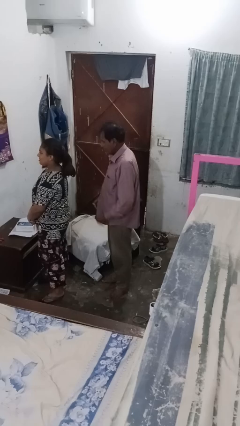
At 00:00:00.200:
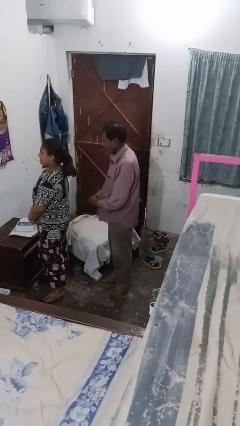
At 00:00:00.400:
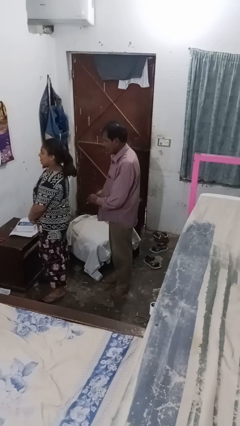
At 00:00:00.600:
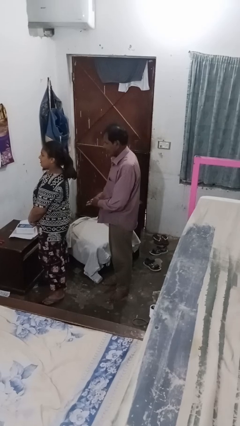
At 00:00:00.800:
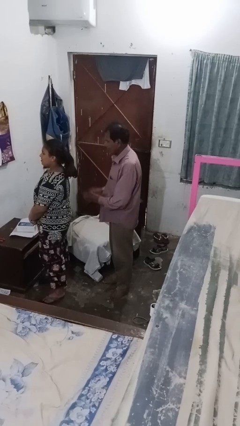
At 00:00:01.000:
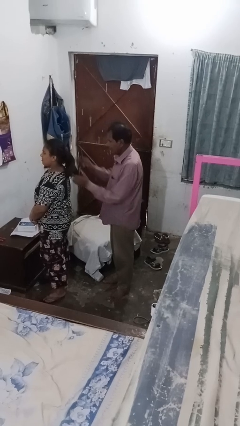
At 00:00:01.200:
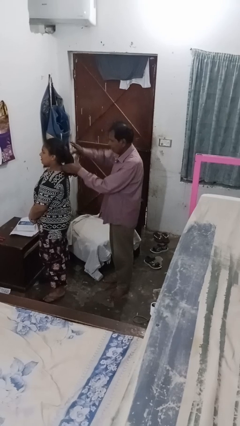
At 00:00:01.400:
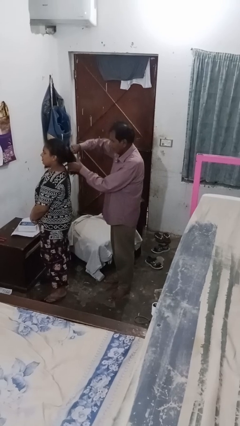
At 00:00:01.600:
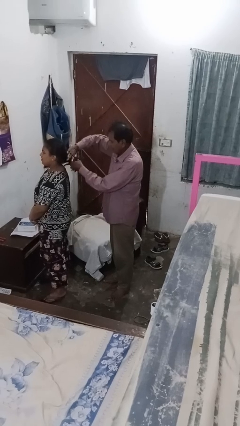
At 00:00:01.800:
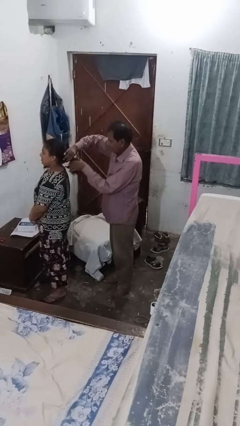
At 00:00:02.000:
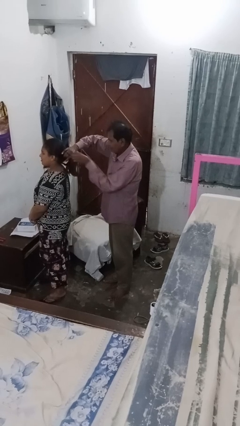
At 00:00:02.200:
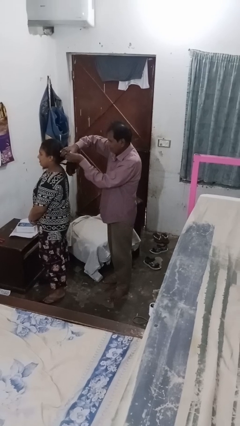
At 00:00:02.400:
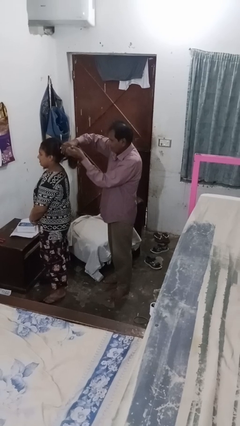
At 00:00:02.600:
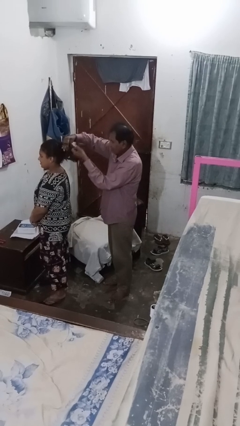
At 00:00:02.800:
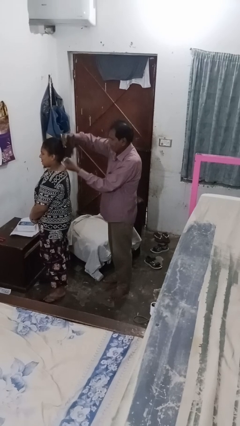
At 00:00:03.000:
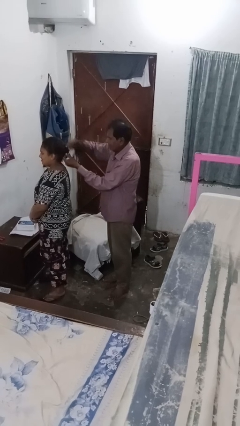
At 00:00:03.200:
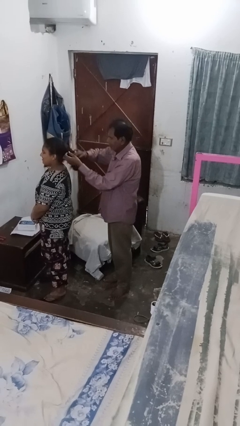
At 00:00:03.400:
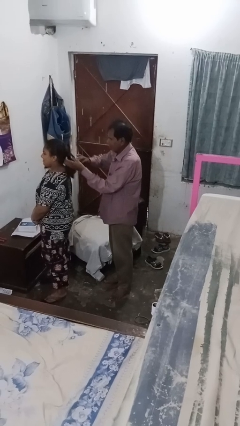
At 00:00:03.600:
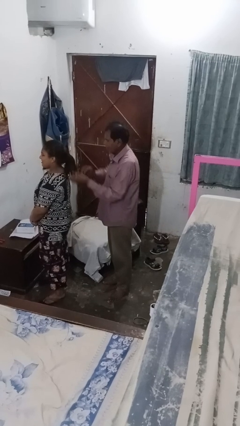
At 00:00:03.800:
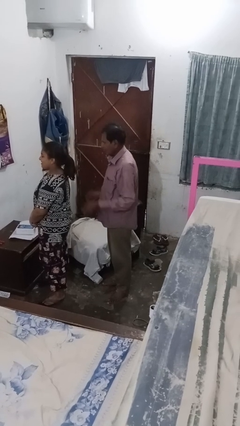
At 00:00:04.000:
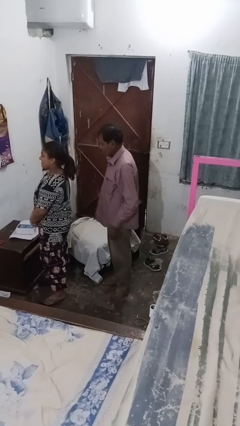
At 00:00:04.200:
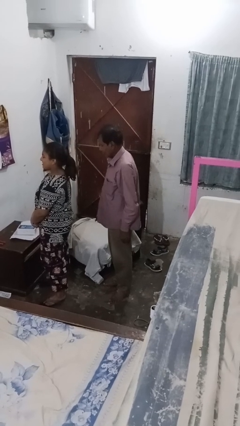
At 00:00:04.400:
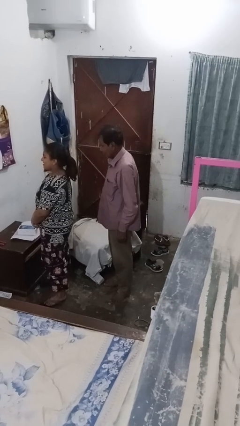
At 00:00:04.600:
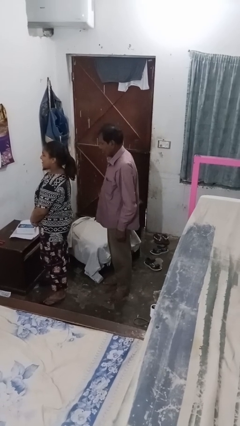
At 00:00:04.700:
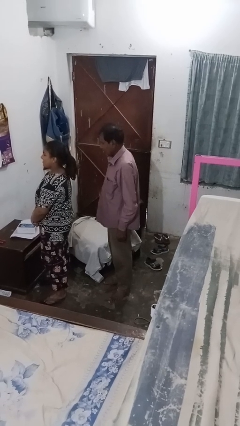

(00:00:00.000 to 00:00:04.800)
person braids hair of person

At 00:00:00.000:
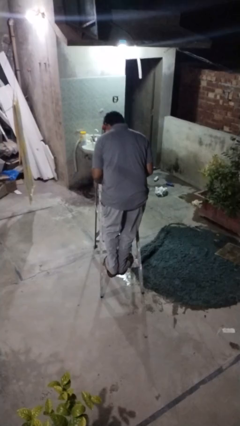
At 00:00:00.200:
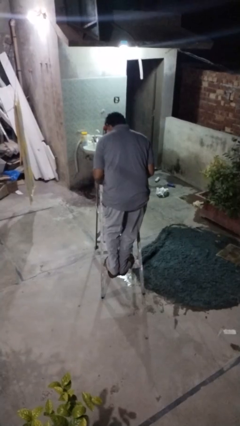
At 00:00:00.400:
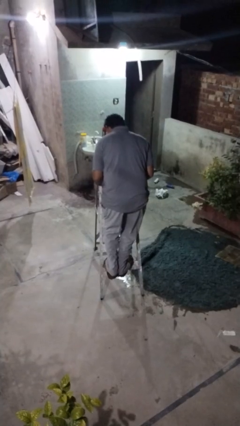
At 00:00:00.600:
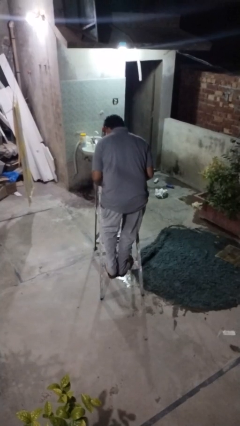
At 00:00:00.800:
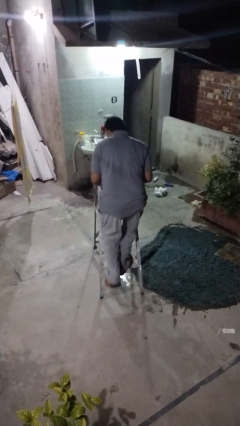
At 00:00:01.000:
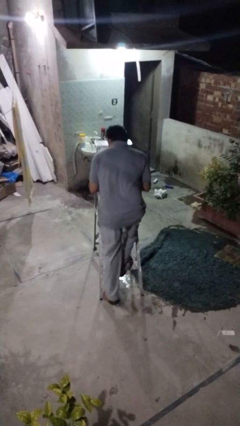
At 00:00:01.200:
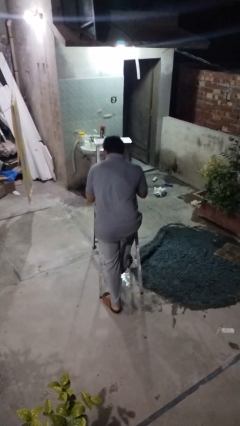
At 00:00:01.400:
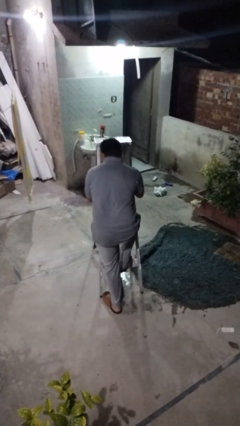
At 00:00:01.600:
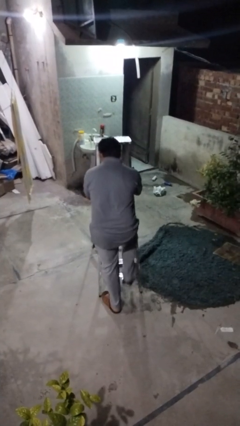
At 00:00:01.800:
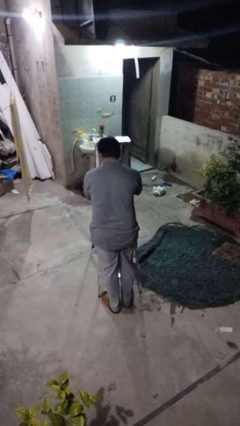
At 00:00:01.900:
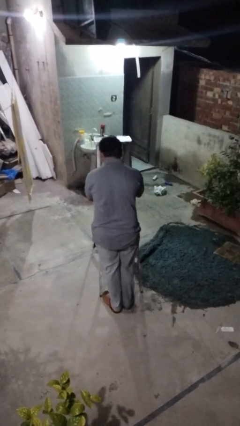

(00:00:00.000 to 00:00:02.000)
person climbs down ladder

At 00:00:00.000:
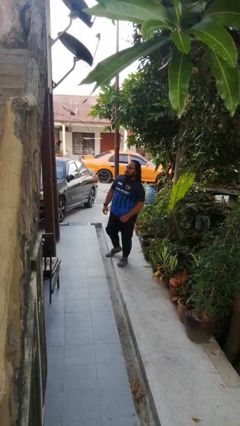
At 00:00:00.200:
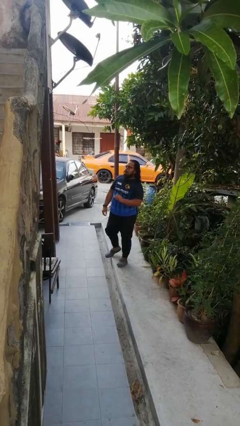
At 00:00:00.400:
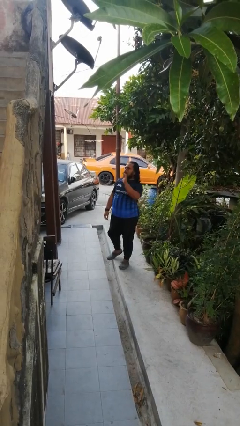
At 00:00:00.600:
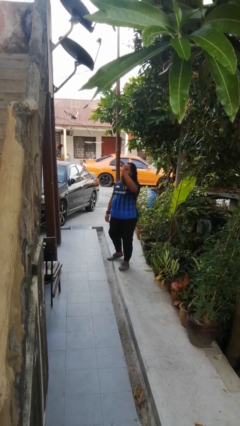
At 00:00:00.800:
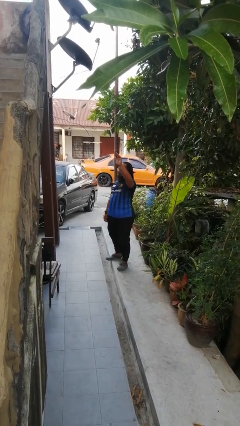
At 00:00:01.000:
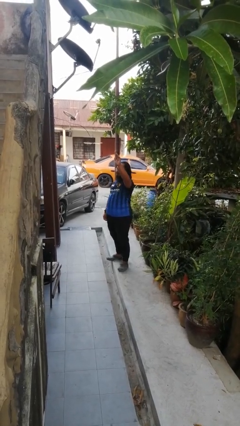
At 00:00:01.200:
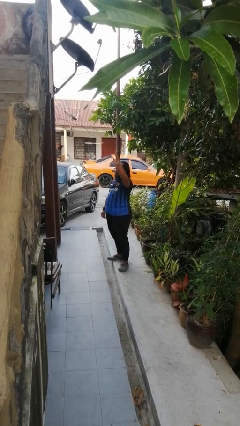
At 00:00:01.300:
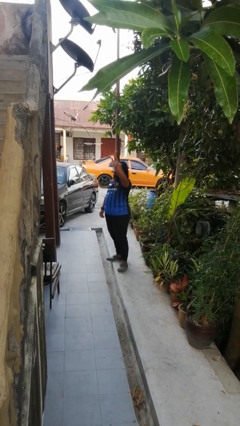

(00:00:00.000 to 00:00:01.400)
person gestures raise hand

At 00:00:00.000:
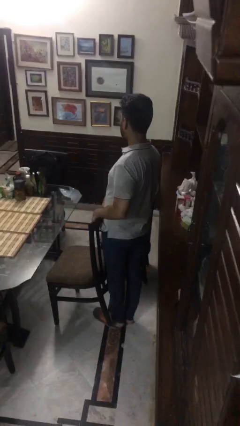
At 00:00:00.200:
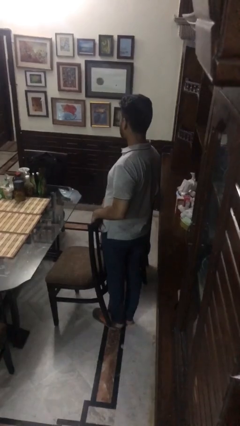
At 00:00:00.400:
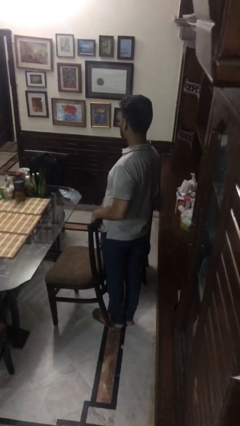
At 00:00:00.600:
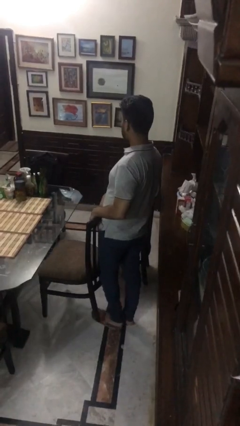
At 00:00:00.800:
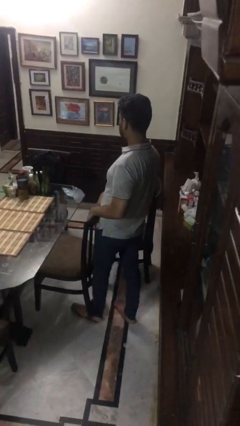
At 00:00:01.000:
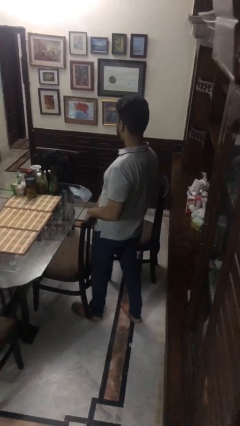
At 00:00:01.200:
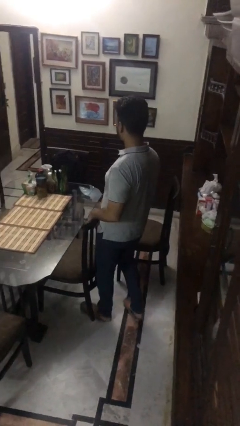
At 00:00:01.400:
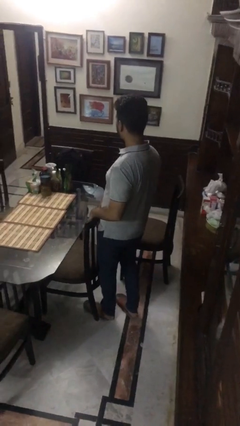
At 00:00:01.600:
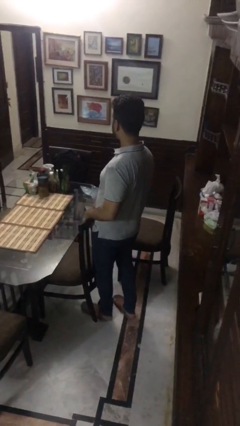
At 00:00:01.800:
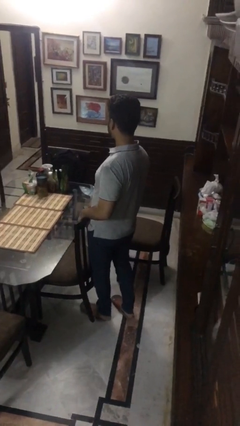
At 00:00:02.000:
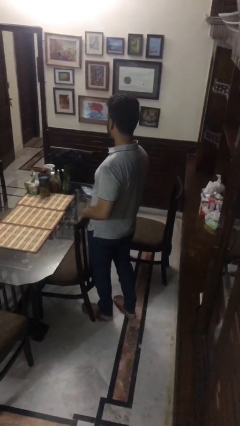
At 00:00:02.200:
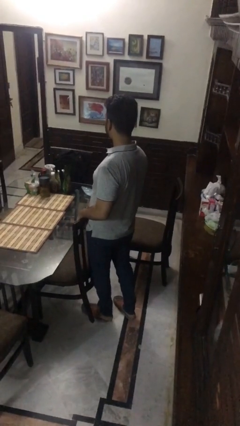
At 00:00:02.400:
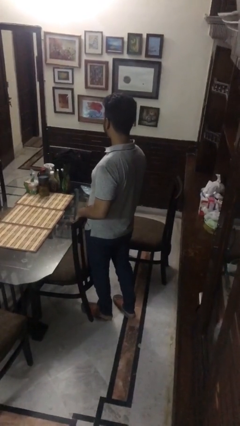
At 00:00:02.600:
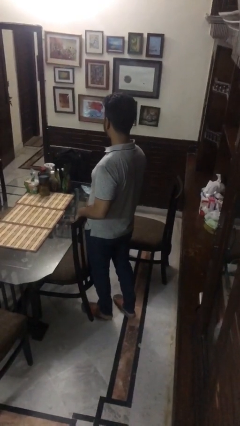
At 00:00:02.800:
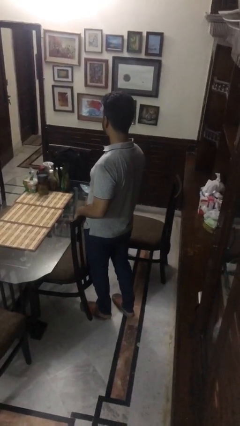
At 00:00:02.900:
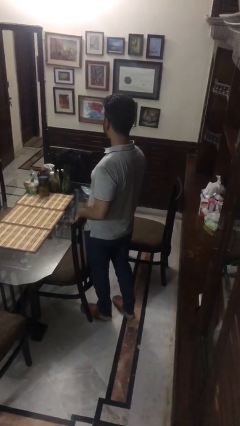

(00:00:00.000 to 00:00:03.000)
person pushes in chair

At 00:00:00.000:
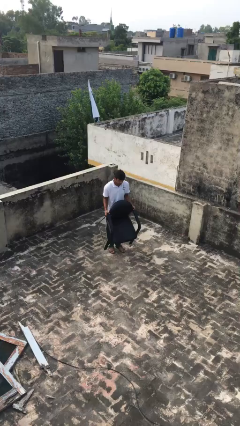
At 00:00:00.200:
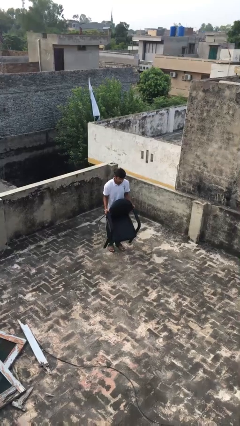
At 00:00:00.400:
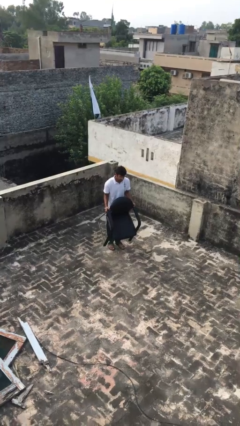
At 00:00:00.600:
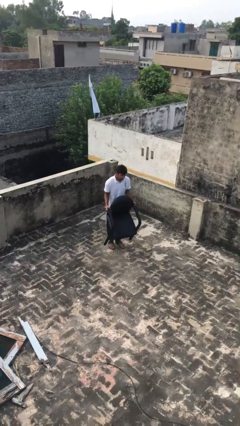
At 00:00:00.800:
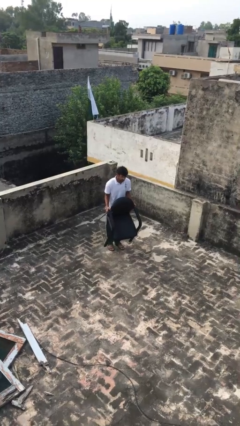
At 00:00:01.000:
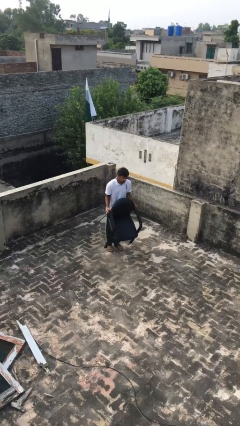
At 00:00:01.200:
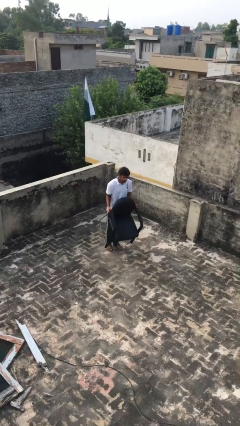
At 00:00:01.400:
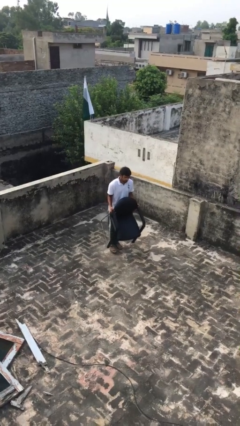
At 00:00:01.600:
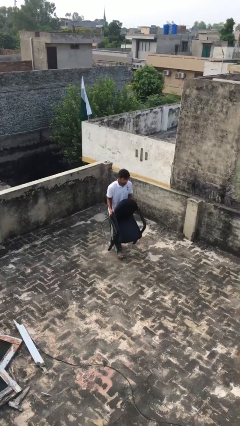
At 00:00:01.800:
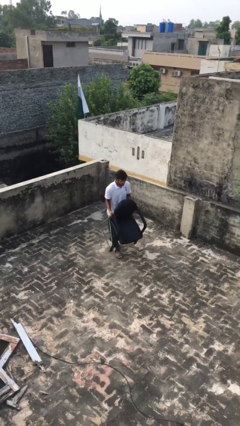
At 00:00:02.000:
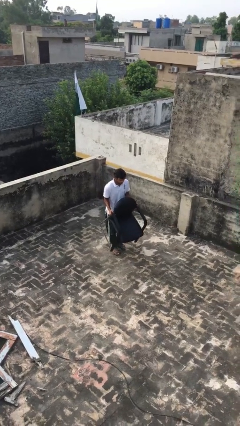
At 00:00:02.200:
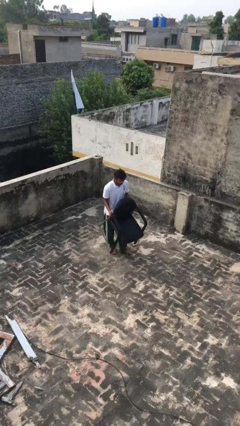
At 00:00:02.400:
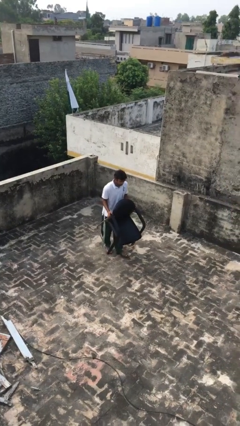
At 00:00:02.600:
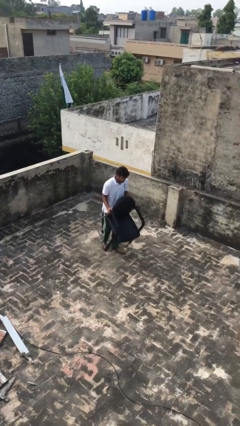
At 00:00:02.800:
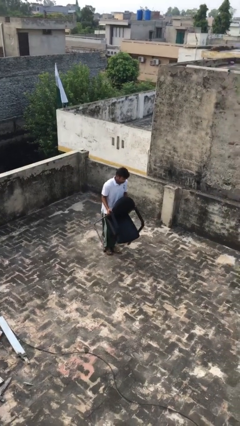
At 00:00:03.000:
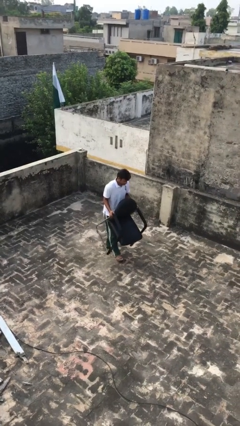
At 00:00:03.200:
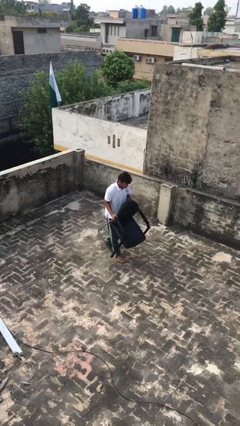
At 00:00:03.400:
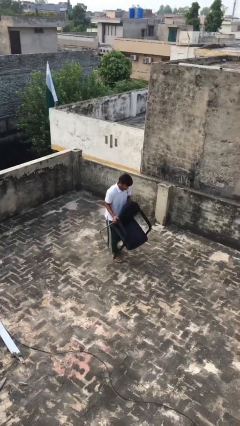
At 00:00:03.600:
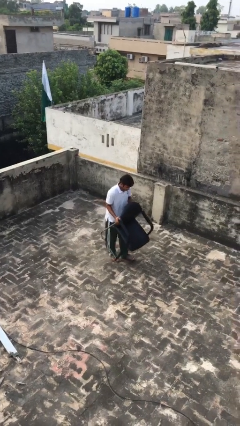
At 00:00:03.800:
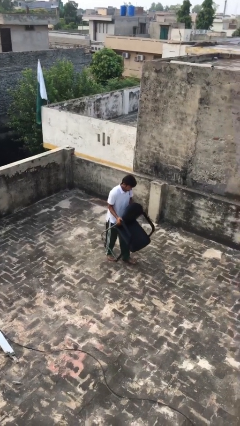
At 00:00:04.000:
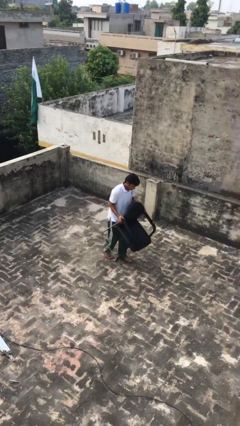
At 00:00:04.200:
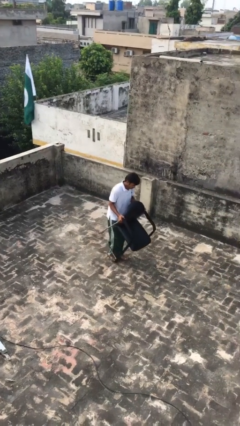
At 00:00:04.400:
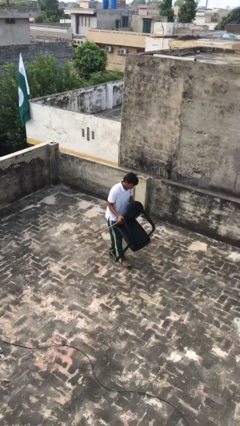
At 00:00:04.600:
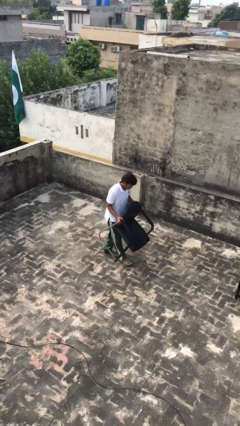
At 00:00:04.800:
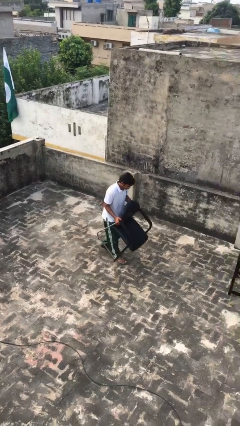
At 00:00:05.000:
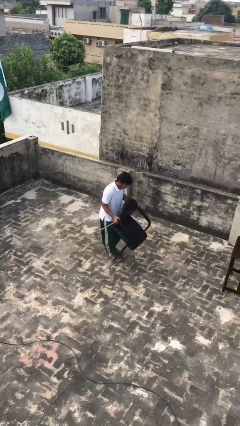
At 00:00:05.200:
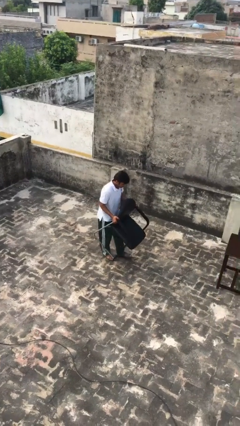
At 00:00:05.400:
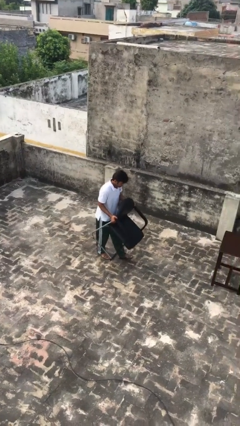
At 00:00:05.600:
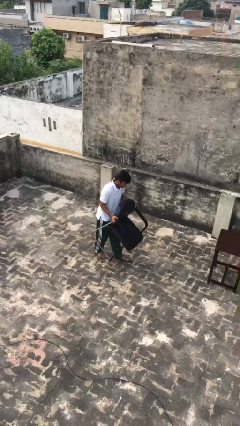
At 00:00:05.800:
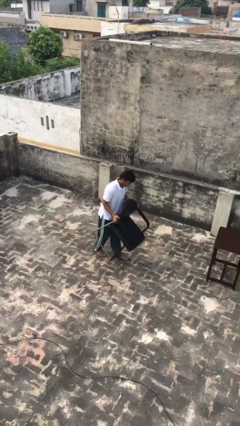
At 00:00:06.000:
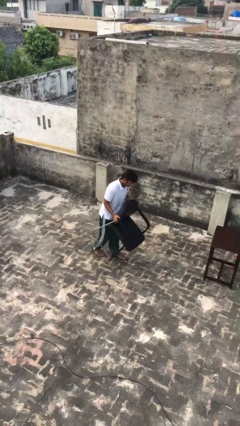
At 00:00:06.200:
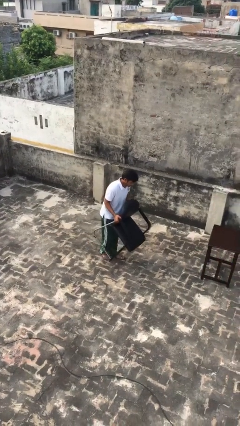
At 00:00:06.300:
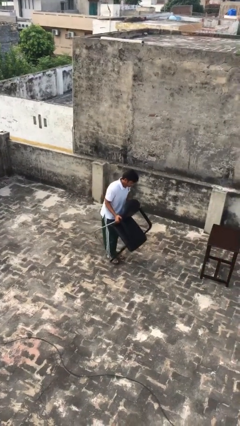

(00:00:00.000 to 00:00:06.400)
person carries heavy object
